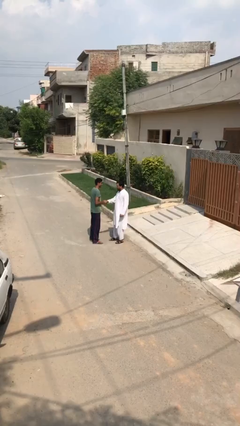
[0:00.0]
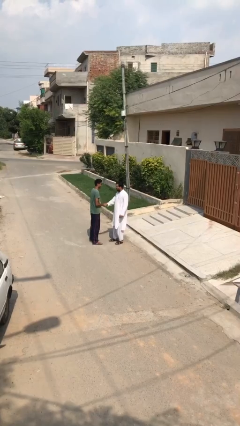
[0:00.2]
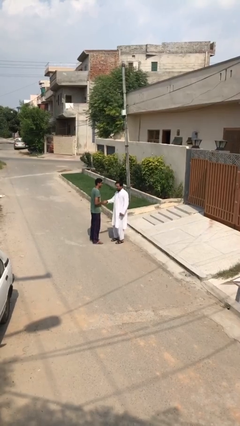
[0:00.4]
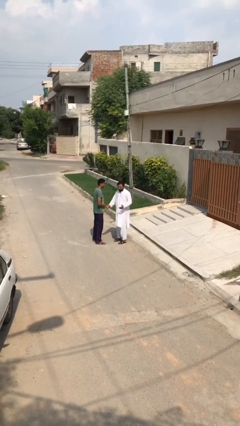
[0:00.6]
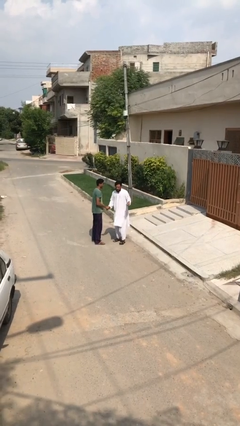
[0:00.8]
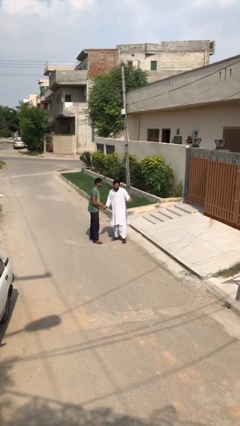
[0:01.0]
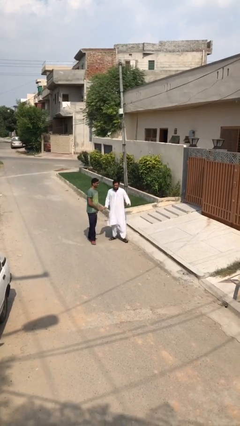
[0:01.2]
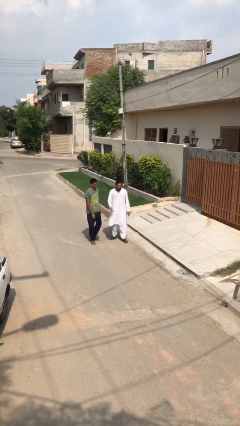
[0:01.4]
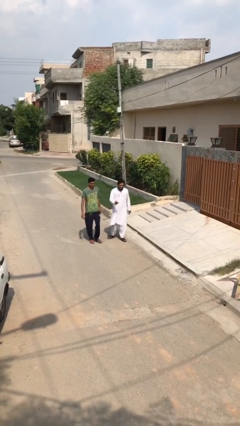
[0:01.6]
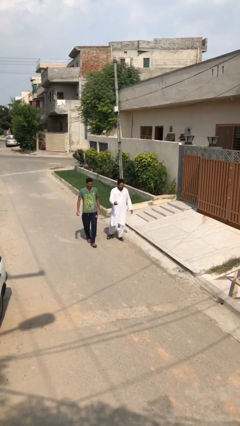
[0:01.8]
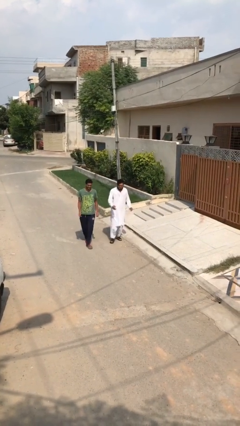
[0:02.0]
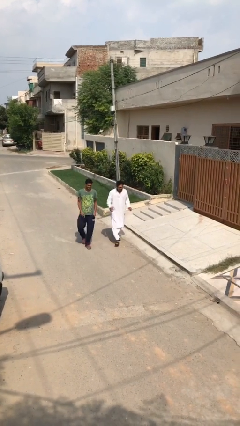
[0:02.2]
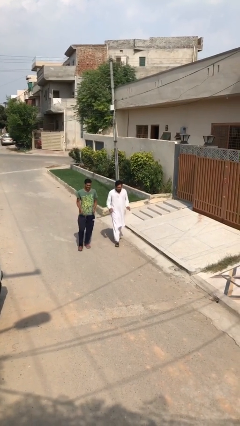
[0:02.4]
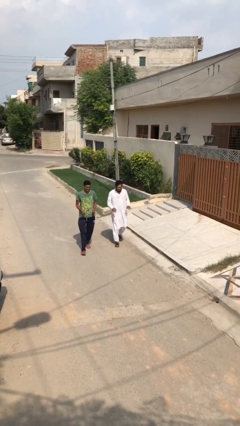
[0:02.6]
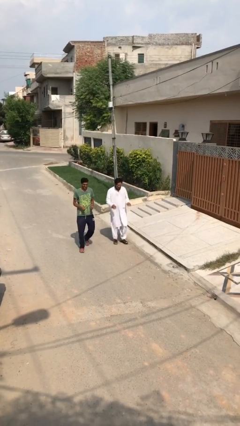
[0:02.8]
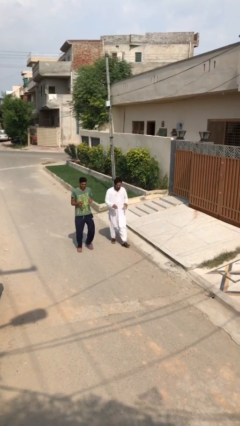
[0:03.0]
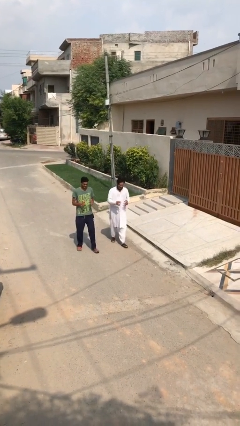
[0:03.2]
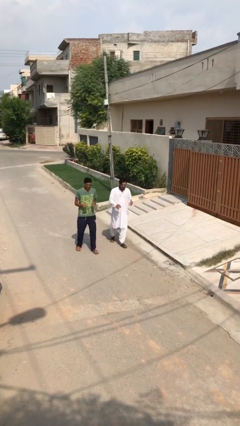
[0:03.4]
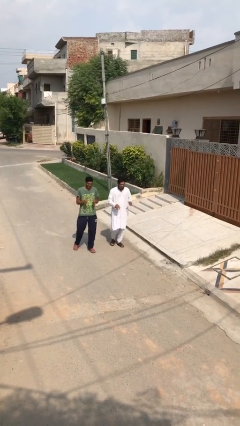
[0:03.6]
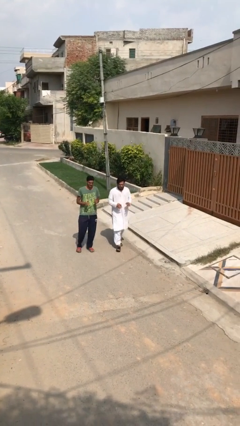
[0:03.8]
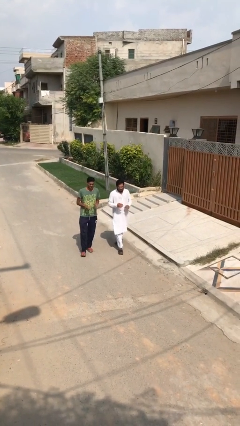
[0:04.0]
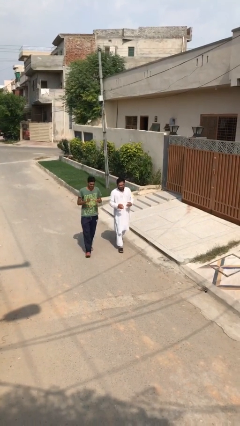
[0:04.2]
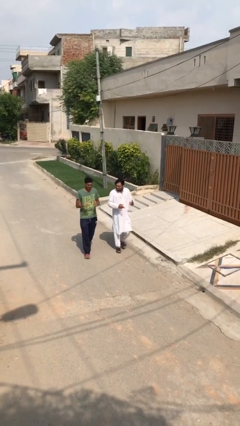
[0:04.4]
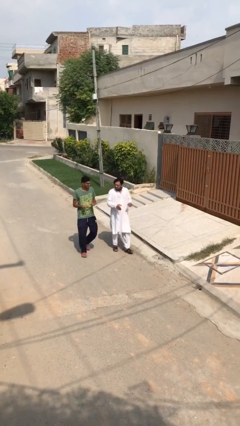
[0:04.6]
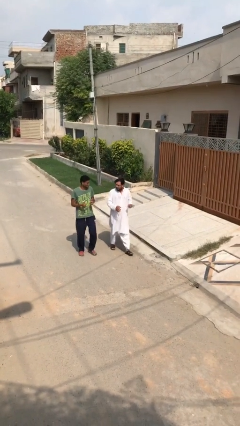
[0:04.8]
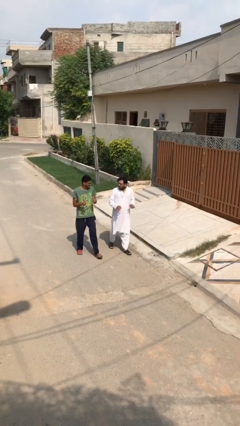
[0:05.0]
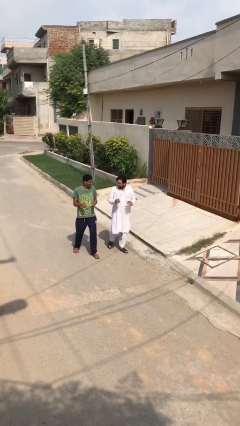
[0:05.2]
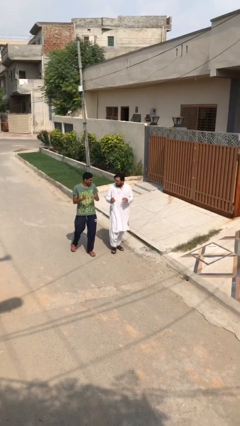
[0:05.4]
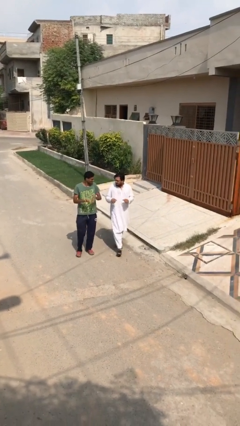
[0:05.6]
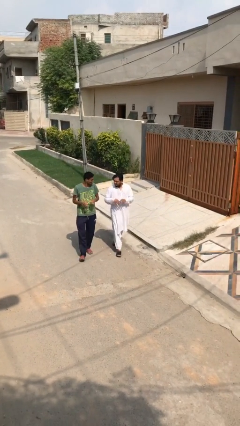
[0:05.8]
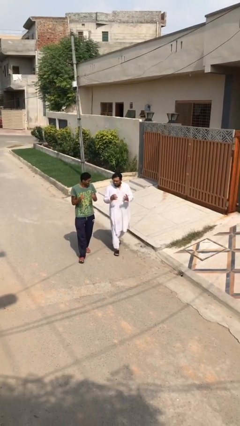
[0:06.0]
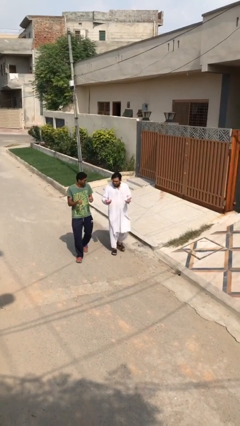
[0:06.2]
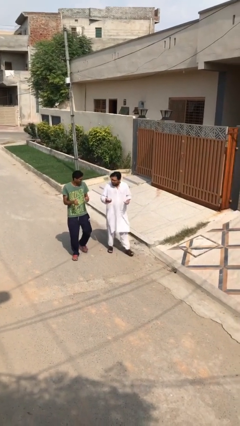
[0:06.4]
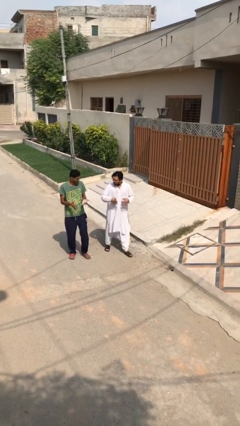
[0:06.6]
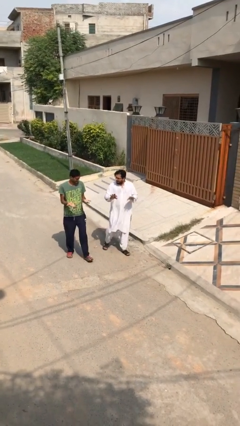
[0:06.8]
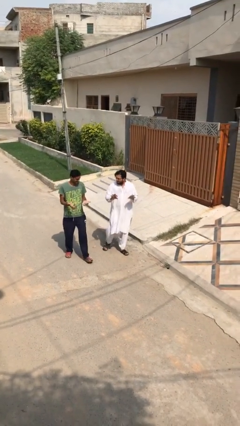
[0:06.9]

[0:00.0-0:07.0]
person talks to person

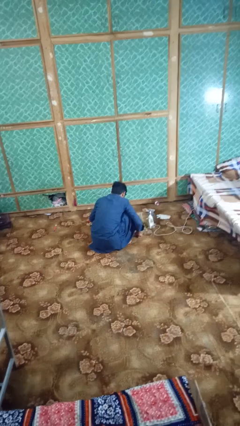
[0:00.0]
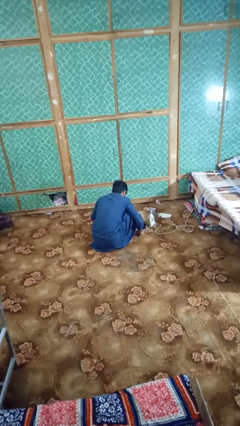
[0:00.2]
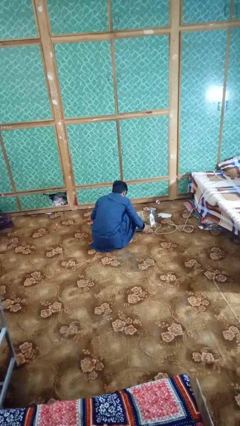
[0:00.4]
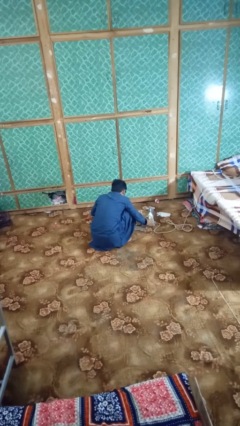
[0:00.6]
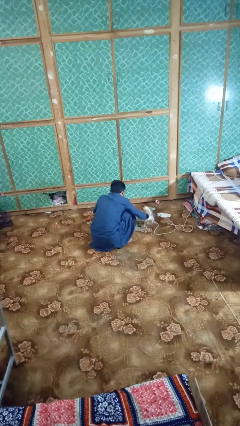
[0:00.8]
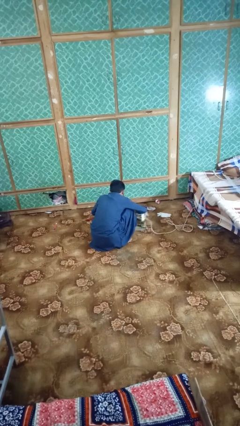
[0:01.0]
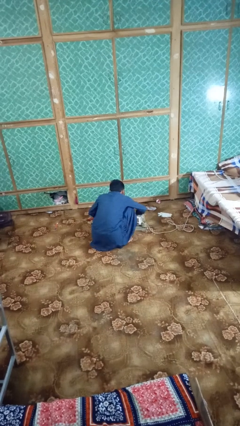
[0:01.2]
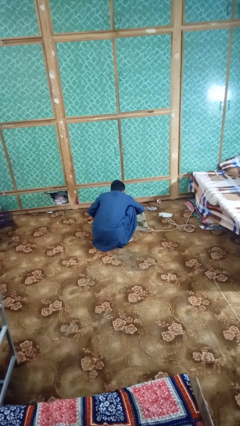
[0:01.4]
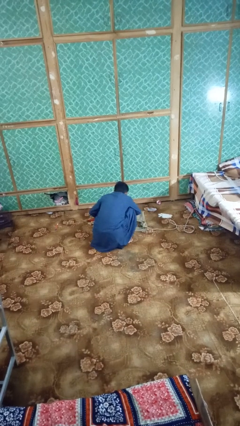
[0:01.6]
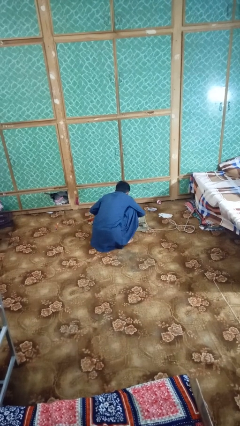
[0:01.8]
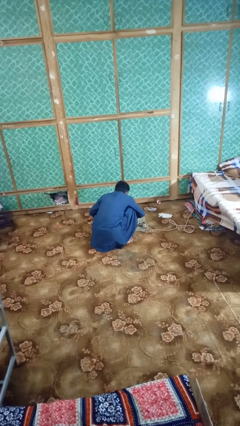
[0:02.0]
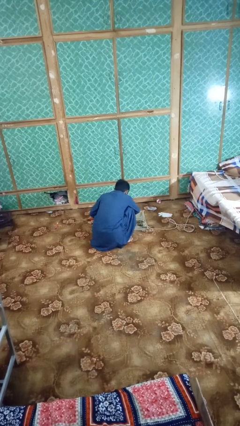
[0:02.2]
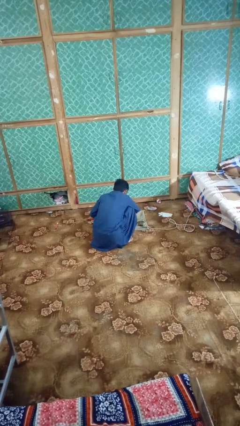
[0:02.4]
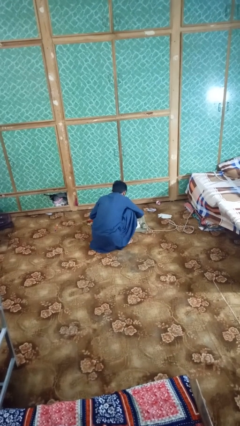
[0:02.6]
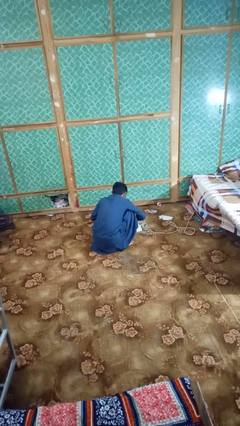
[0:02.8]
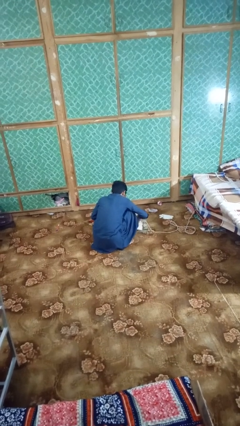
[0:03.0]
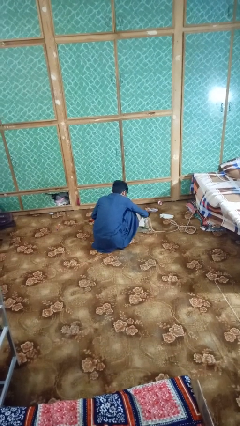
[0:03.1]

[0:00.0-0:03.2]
person irons clothes

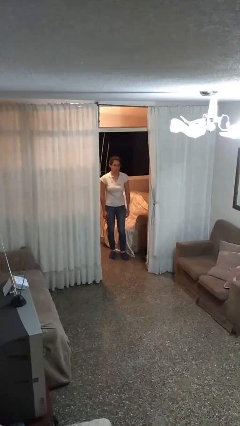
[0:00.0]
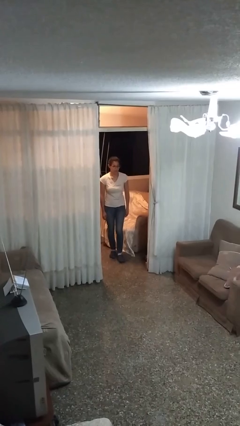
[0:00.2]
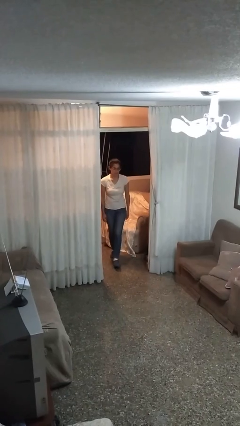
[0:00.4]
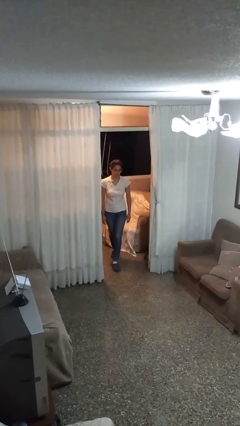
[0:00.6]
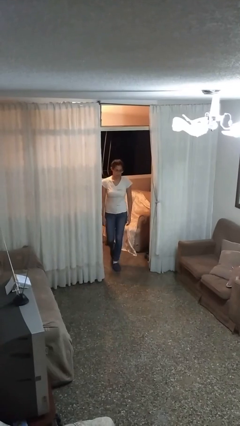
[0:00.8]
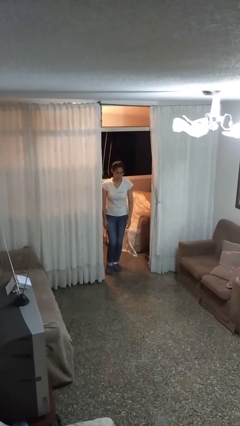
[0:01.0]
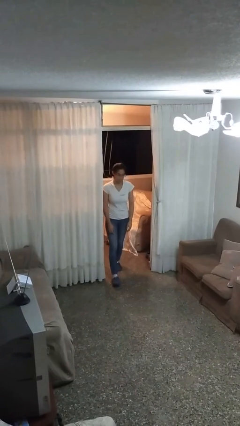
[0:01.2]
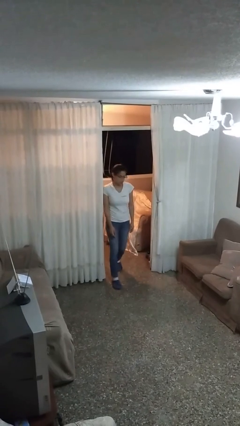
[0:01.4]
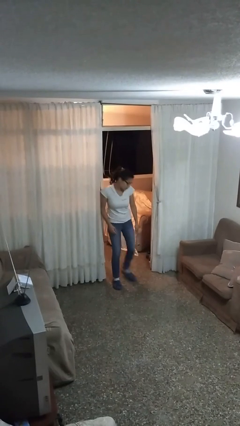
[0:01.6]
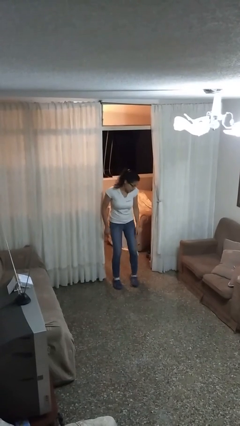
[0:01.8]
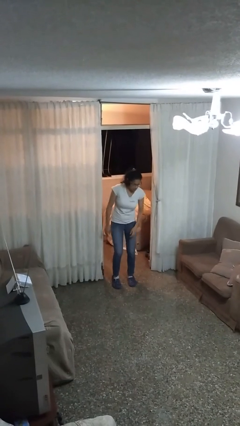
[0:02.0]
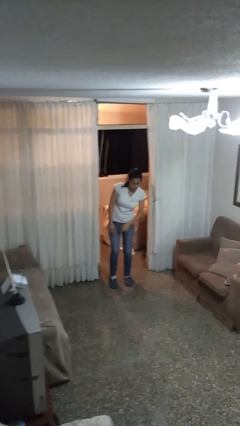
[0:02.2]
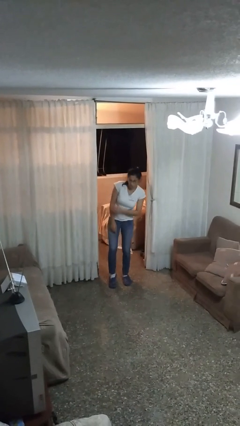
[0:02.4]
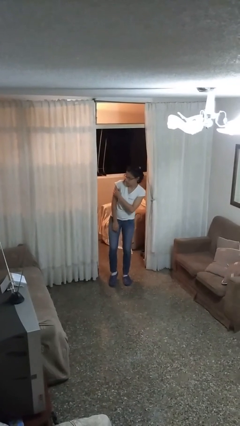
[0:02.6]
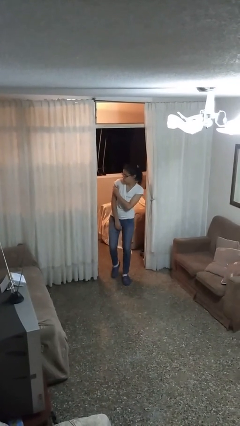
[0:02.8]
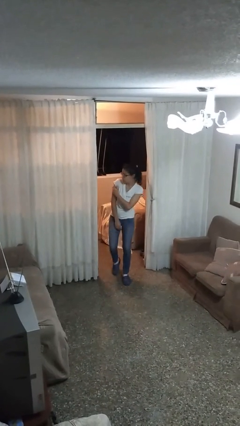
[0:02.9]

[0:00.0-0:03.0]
person bumps into wall

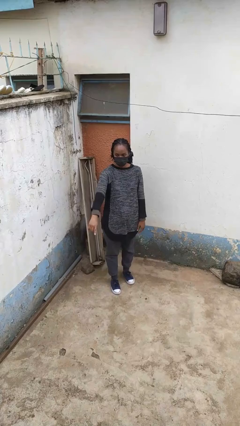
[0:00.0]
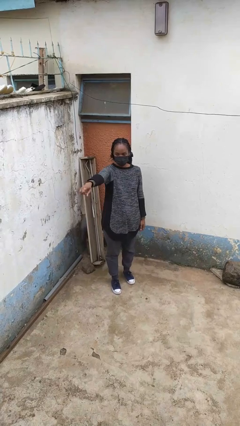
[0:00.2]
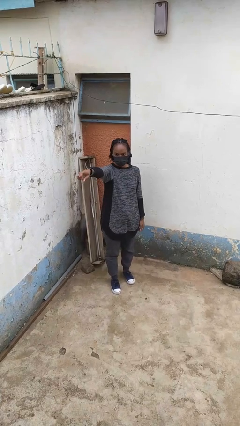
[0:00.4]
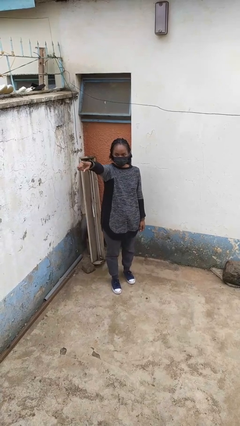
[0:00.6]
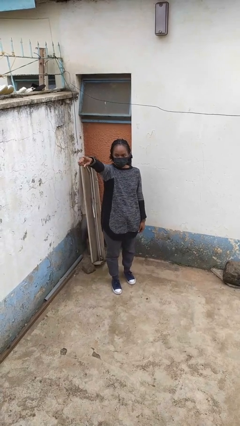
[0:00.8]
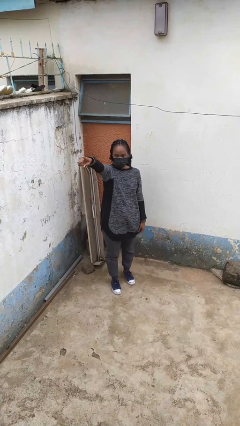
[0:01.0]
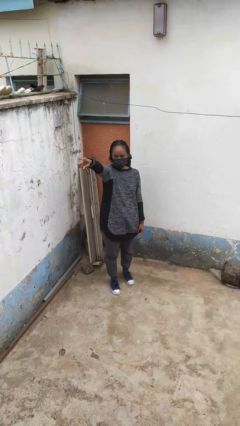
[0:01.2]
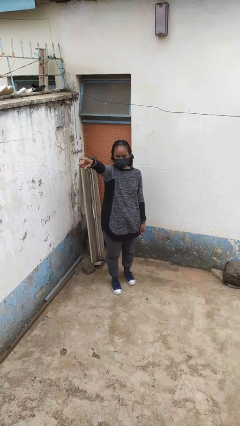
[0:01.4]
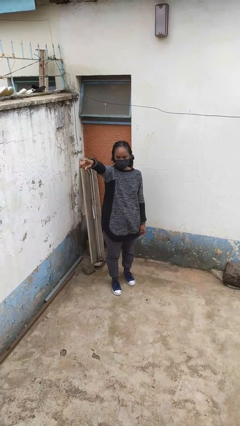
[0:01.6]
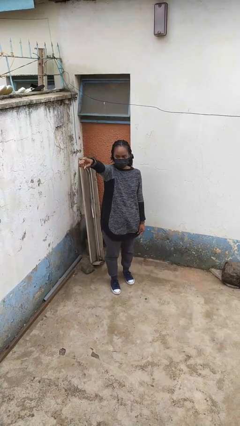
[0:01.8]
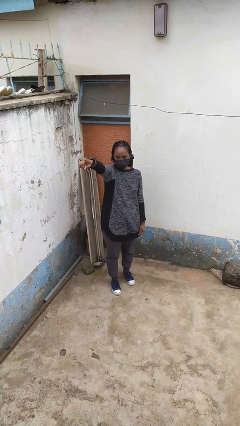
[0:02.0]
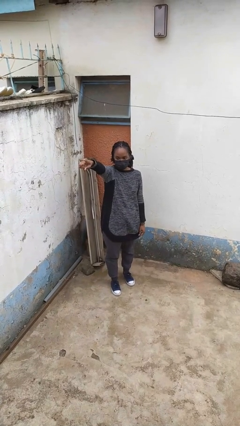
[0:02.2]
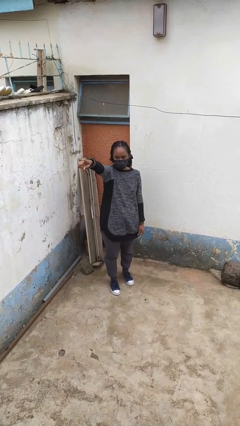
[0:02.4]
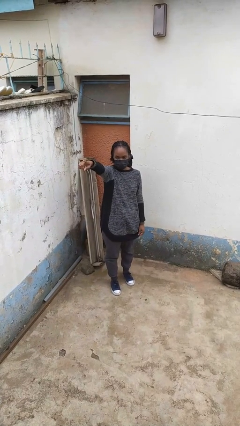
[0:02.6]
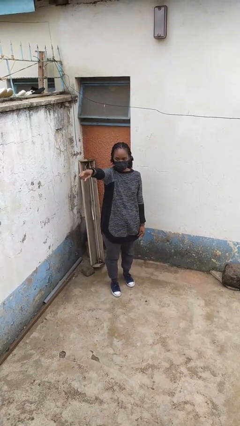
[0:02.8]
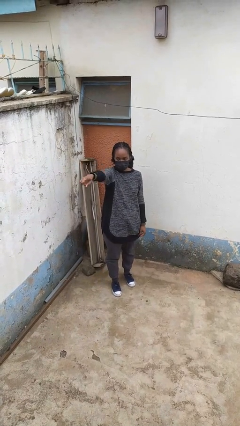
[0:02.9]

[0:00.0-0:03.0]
person points at person

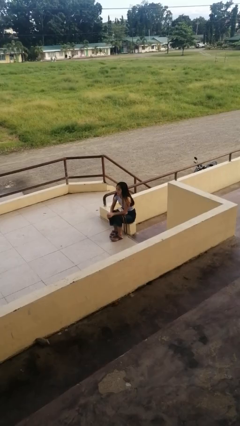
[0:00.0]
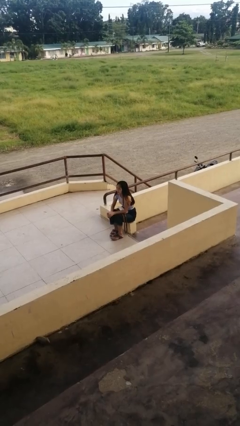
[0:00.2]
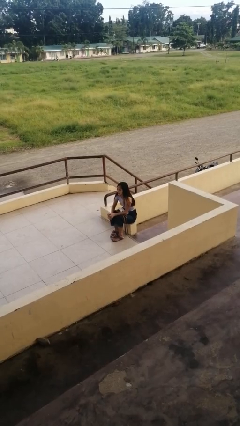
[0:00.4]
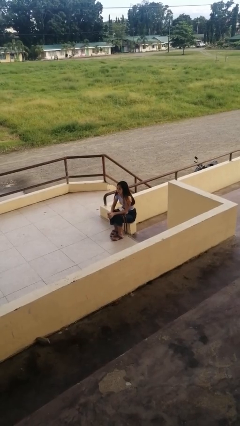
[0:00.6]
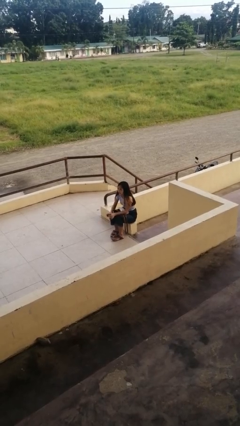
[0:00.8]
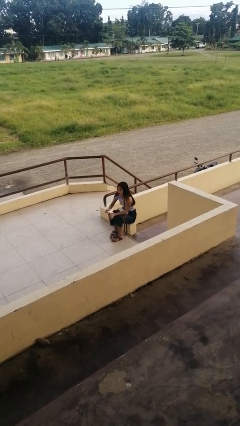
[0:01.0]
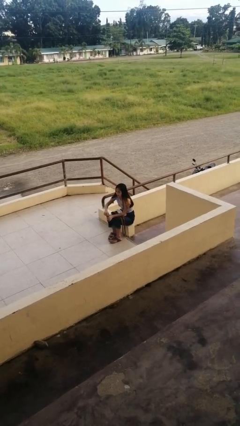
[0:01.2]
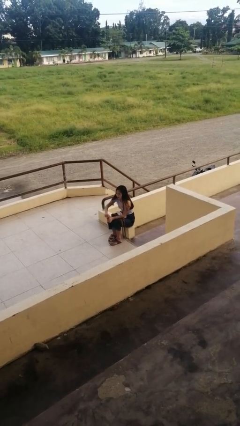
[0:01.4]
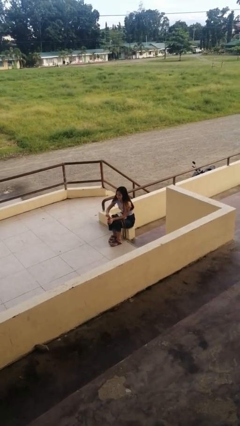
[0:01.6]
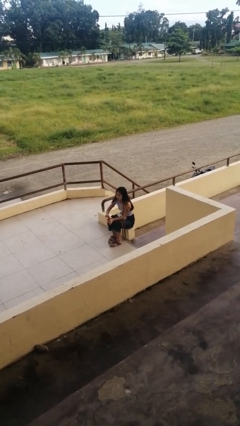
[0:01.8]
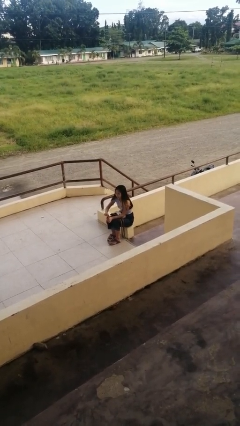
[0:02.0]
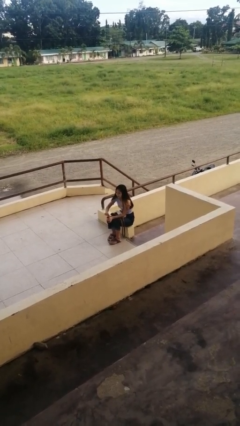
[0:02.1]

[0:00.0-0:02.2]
person opens beverage can
